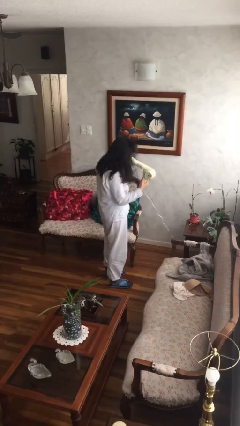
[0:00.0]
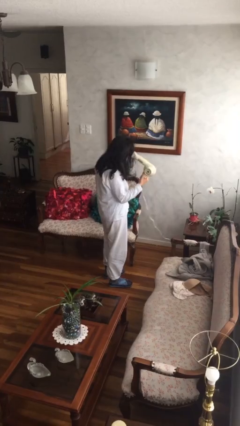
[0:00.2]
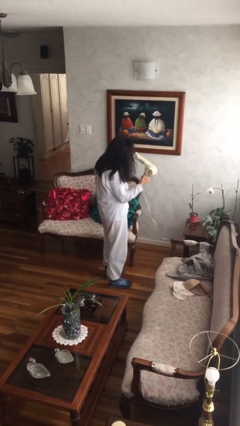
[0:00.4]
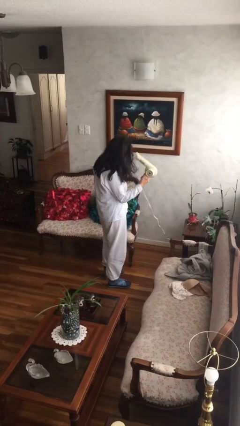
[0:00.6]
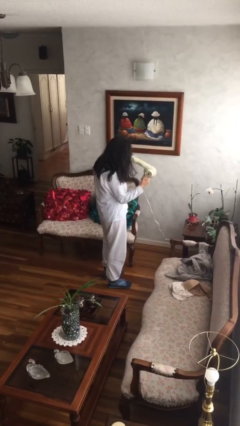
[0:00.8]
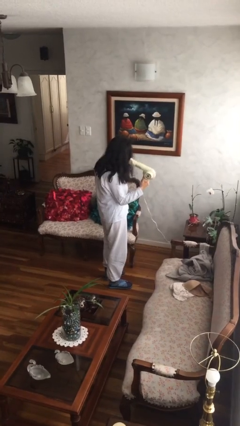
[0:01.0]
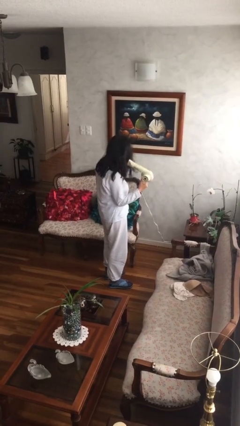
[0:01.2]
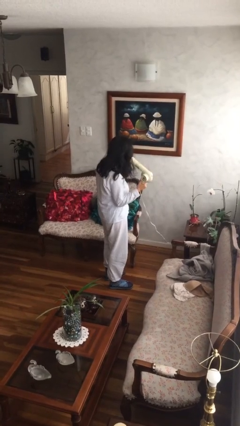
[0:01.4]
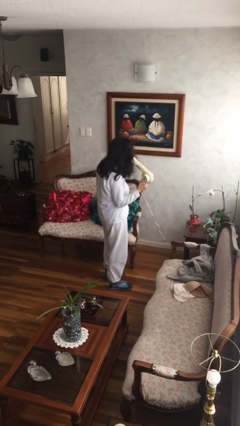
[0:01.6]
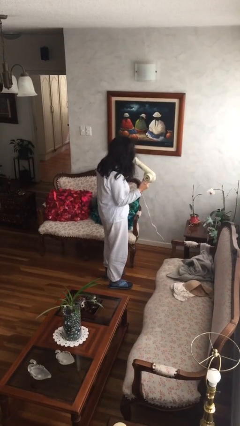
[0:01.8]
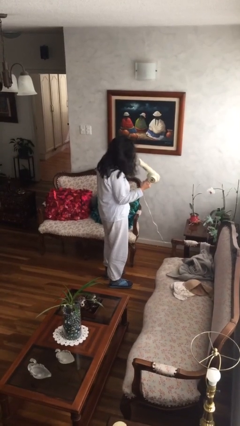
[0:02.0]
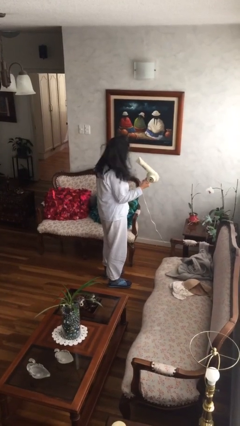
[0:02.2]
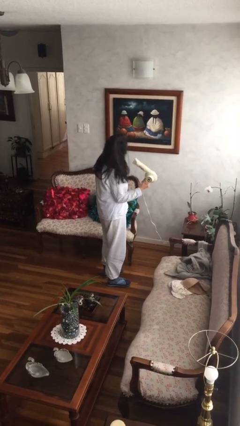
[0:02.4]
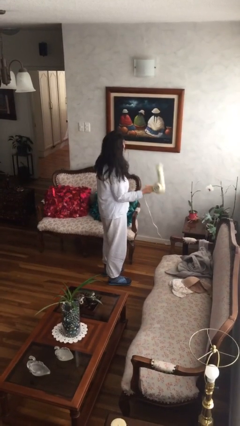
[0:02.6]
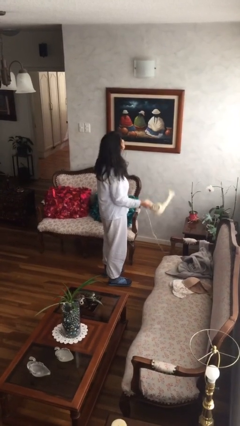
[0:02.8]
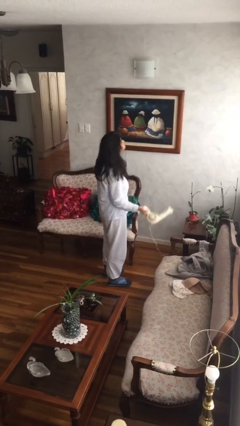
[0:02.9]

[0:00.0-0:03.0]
person dries hair with hairdryer

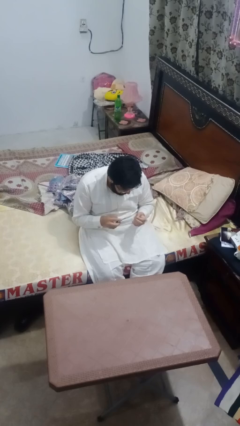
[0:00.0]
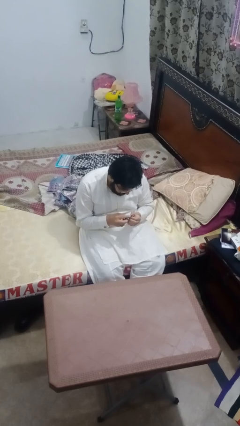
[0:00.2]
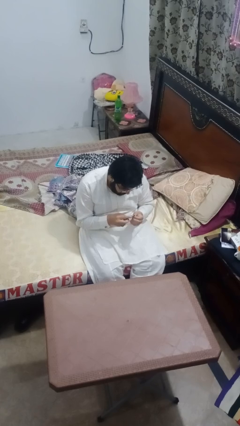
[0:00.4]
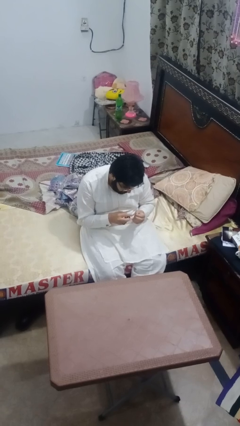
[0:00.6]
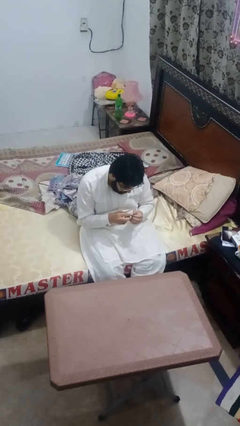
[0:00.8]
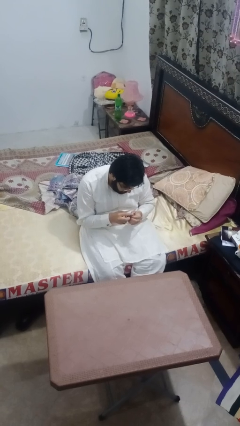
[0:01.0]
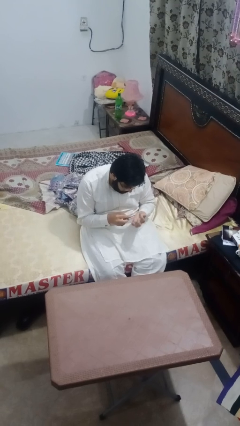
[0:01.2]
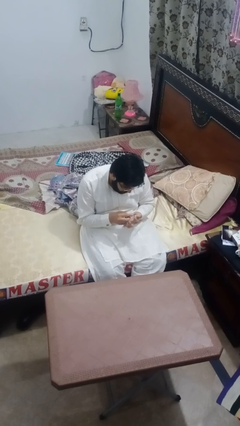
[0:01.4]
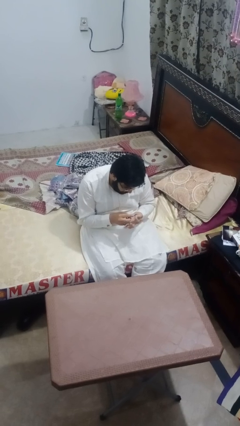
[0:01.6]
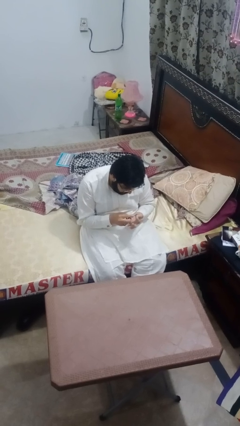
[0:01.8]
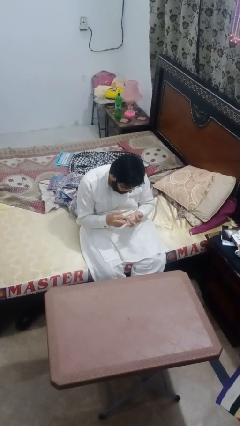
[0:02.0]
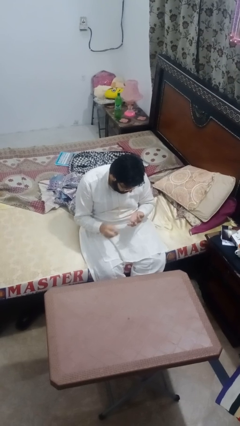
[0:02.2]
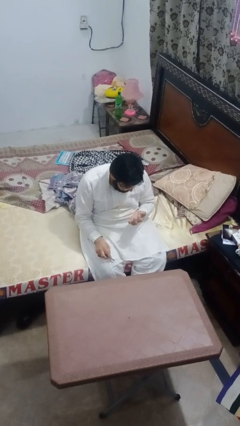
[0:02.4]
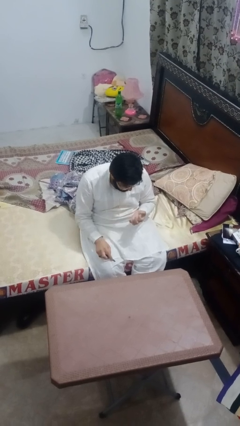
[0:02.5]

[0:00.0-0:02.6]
person files fingernails

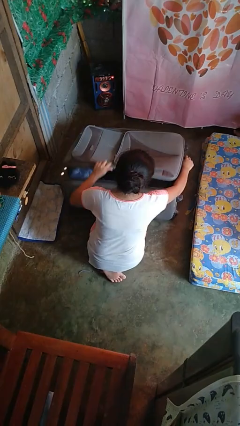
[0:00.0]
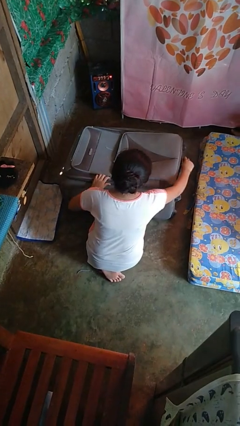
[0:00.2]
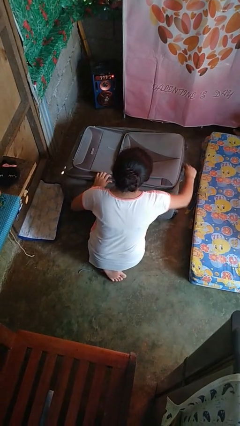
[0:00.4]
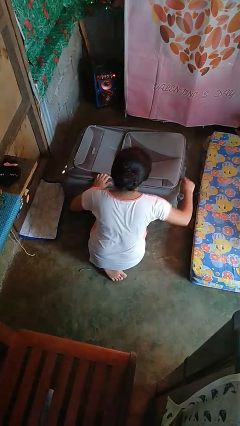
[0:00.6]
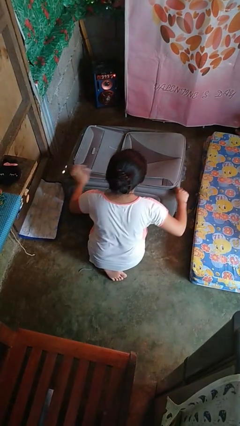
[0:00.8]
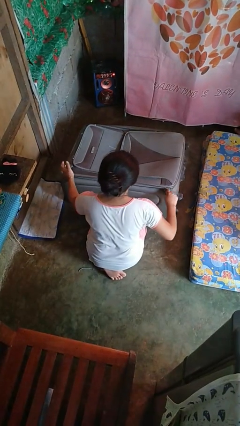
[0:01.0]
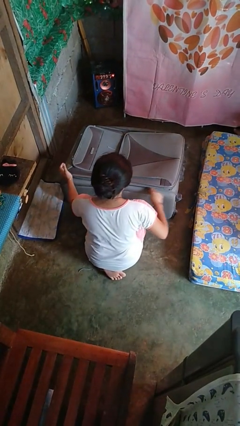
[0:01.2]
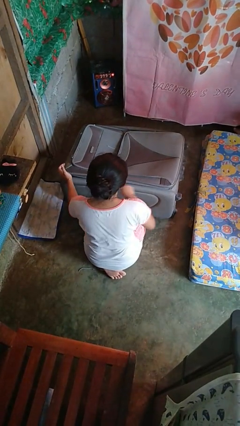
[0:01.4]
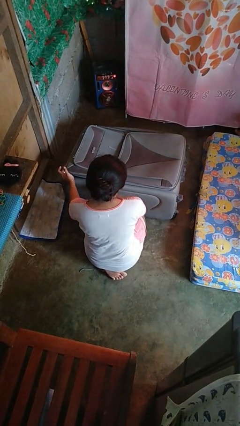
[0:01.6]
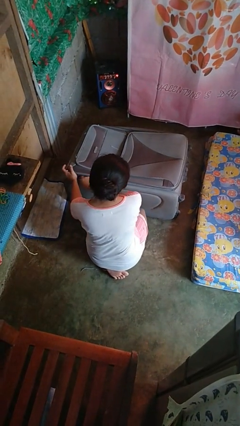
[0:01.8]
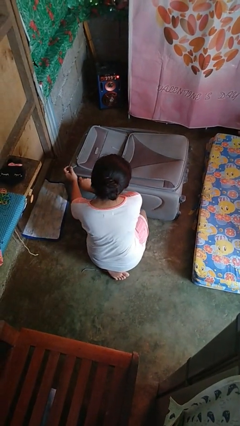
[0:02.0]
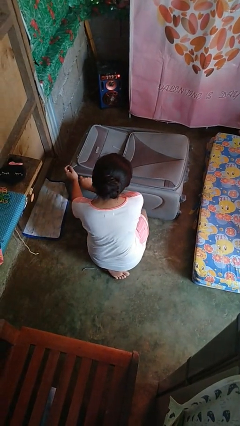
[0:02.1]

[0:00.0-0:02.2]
person closes suitcase

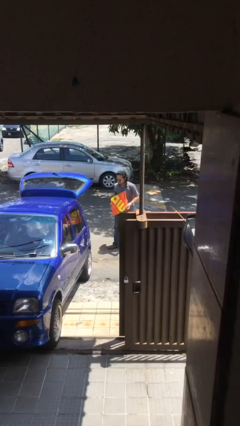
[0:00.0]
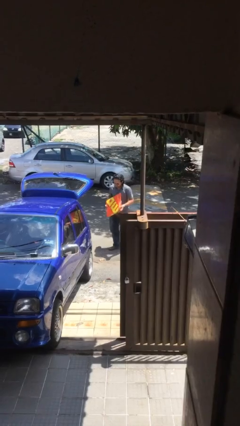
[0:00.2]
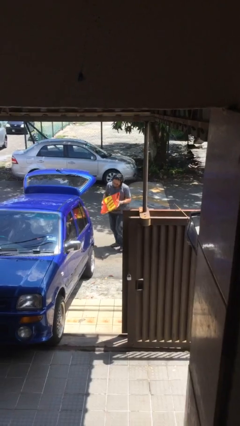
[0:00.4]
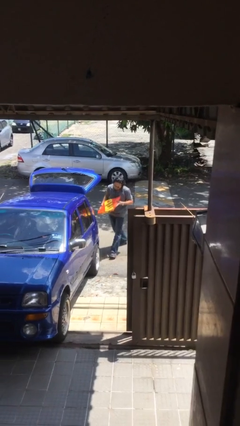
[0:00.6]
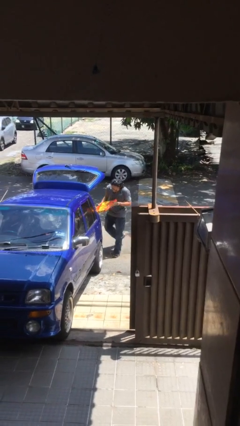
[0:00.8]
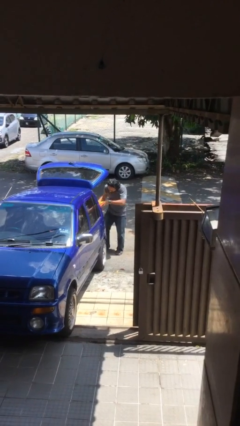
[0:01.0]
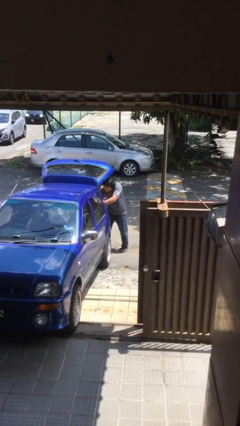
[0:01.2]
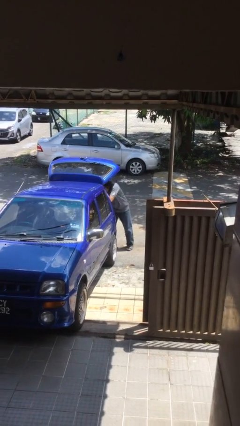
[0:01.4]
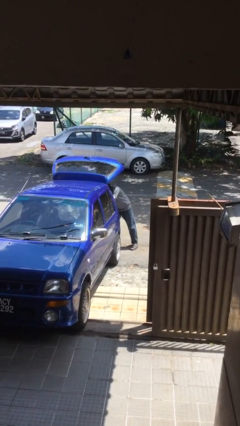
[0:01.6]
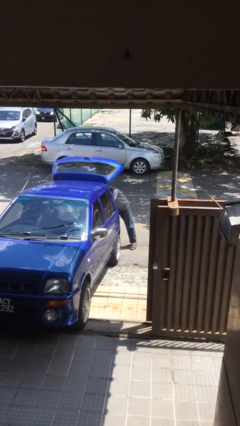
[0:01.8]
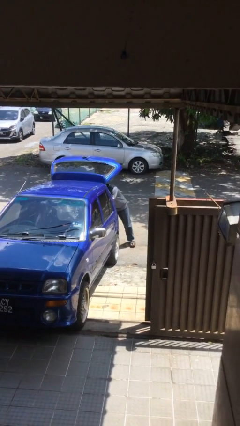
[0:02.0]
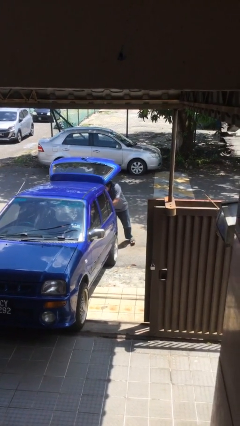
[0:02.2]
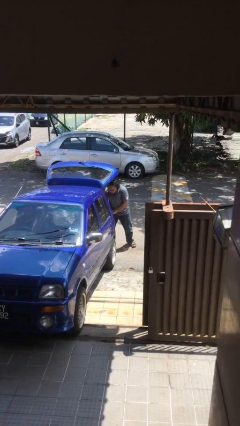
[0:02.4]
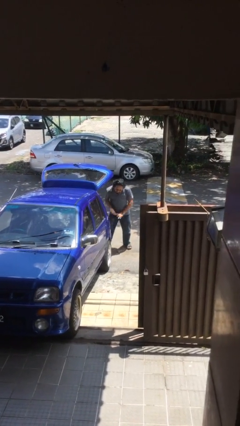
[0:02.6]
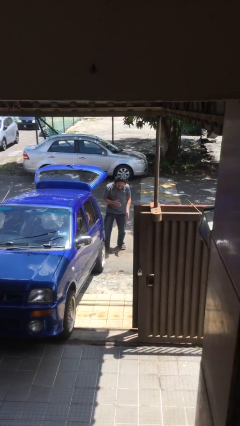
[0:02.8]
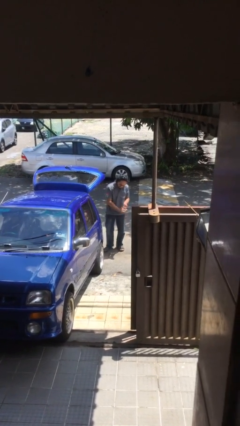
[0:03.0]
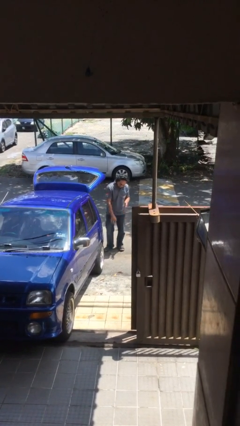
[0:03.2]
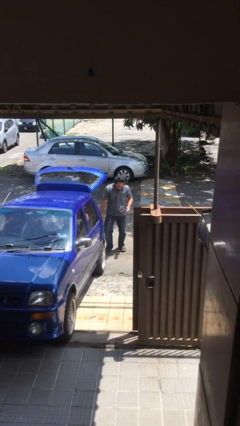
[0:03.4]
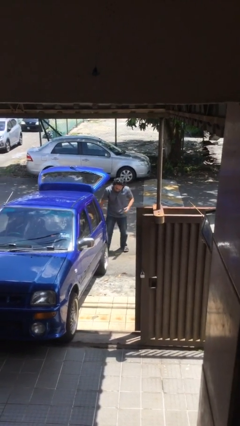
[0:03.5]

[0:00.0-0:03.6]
person loads car

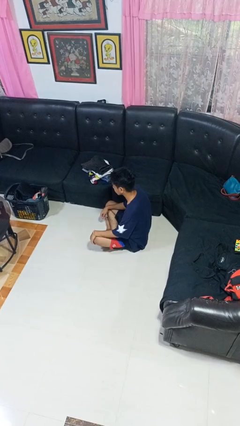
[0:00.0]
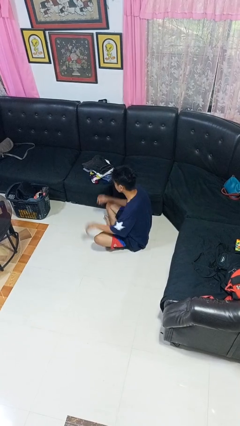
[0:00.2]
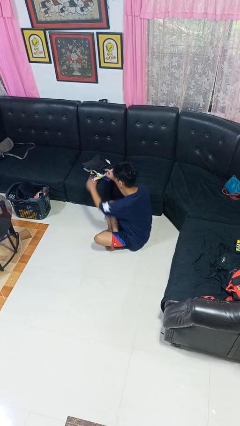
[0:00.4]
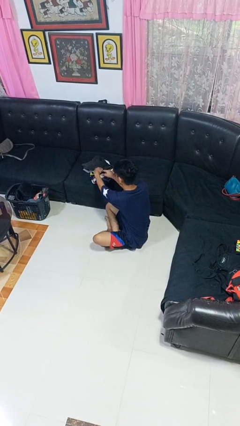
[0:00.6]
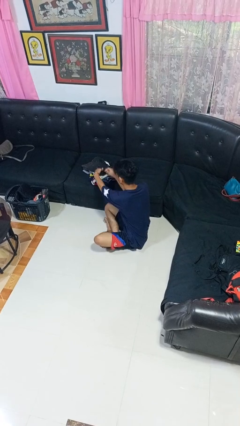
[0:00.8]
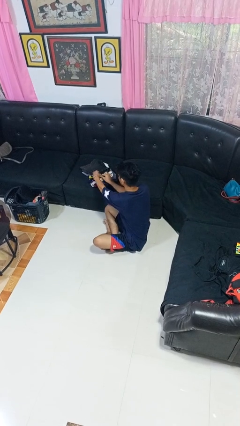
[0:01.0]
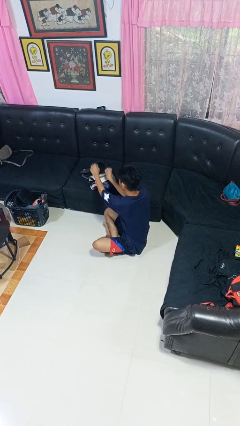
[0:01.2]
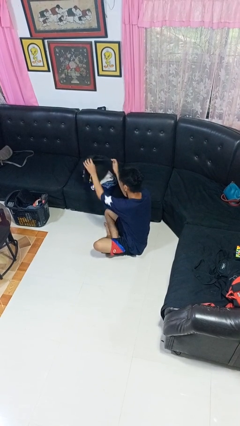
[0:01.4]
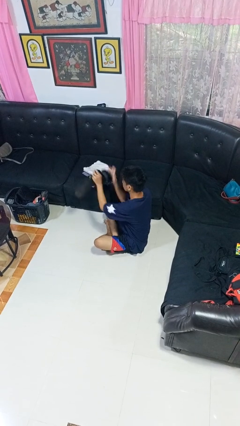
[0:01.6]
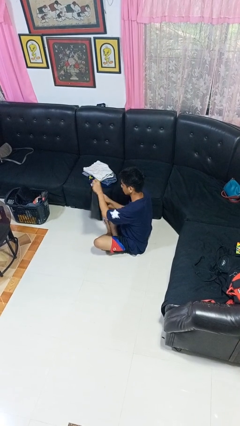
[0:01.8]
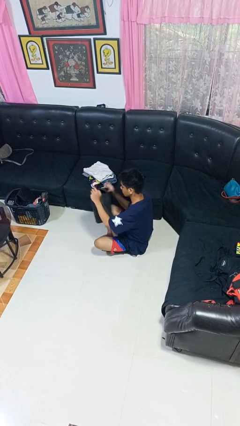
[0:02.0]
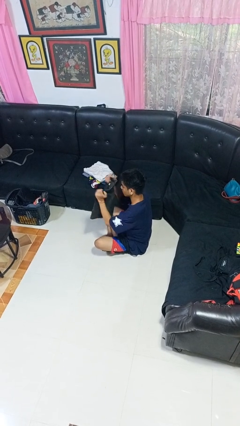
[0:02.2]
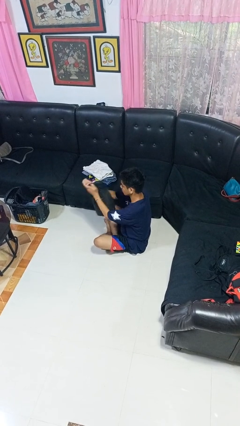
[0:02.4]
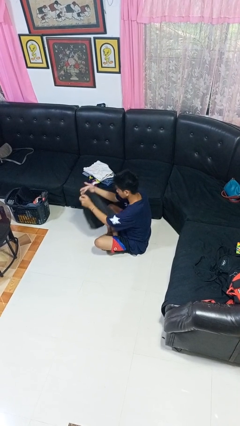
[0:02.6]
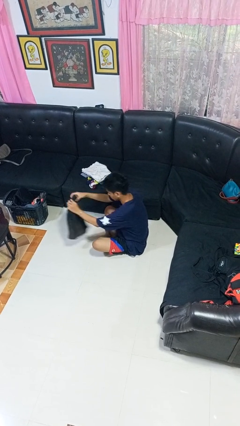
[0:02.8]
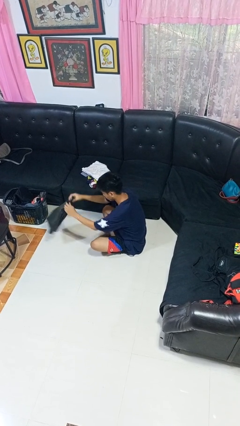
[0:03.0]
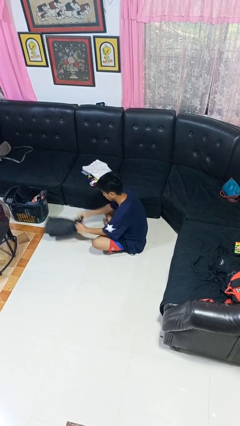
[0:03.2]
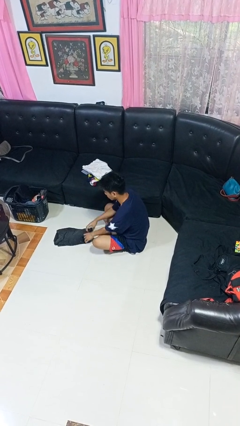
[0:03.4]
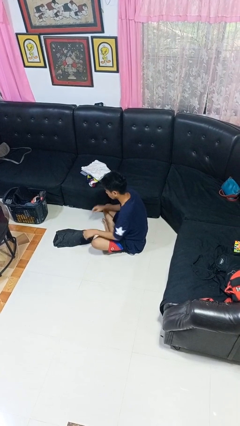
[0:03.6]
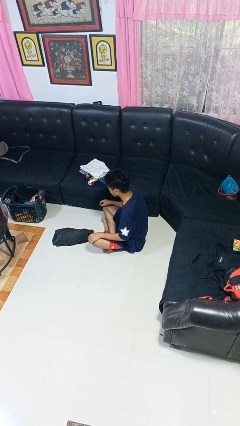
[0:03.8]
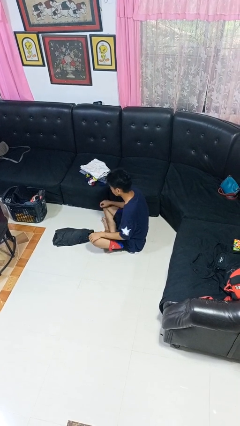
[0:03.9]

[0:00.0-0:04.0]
person folds pants

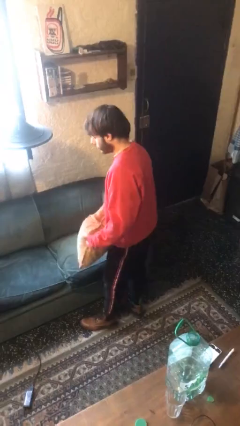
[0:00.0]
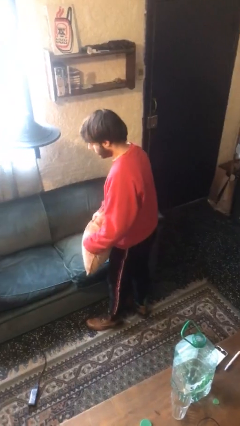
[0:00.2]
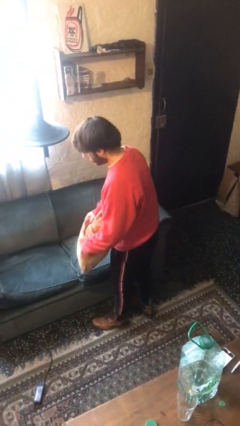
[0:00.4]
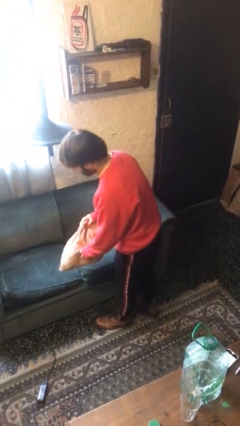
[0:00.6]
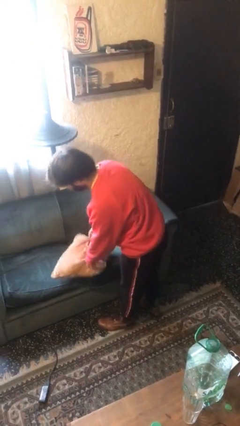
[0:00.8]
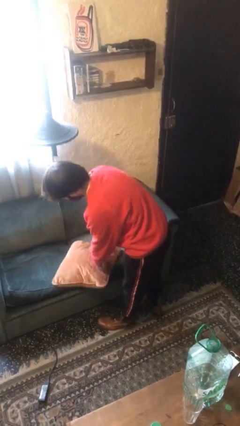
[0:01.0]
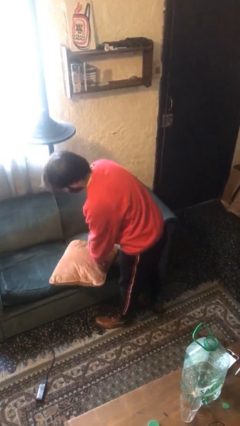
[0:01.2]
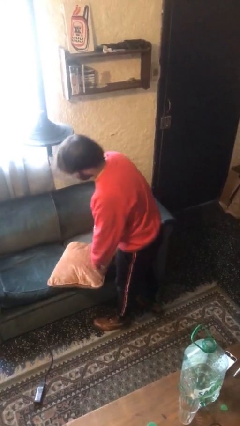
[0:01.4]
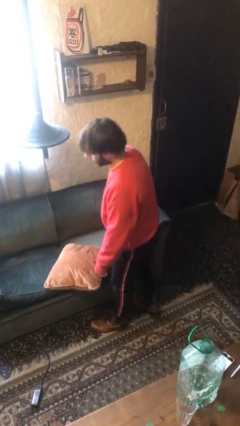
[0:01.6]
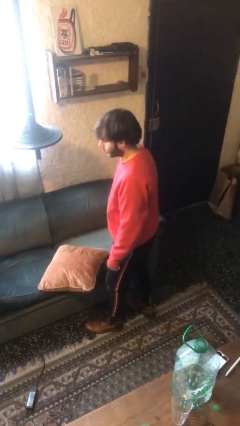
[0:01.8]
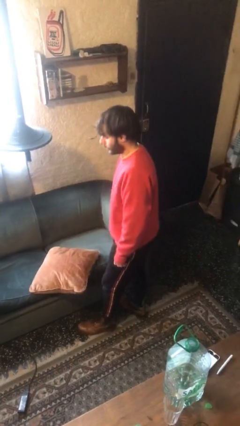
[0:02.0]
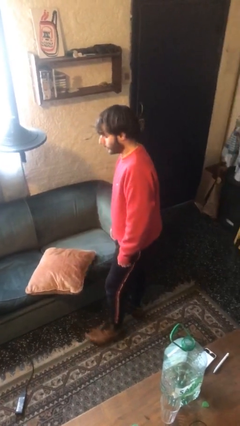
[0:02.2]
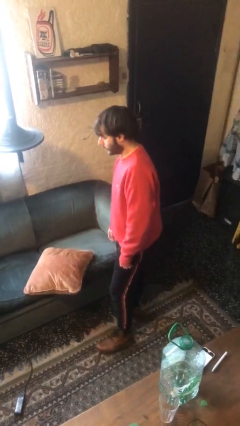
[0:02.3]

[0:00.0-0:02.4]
person puts down object on couch
